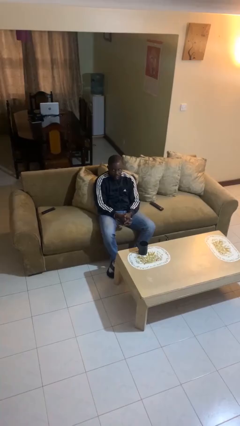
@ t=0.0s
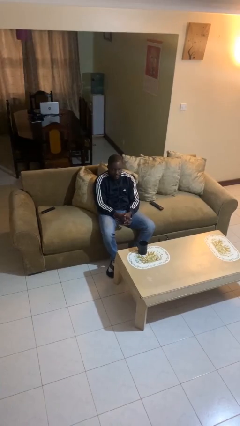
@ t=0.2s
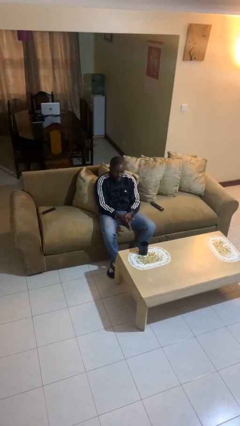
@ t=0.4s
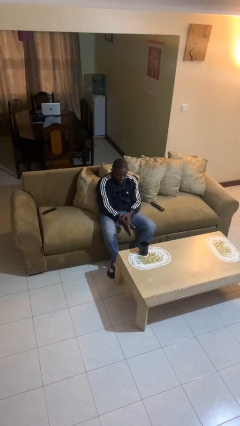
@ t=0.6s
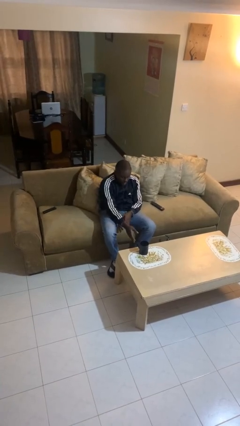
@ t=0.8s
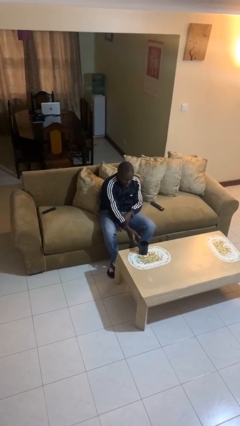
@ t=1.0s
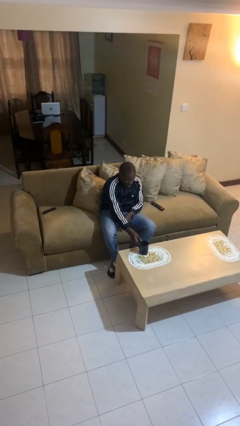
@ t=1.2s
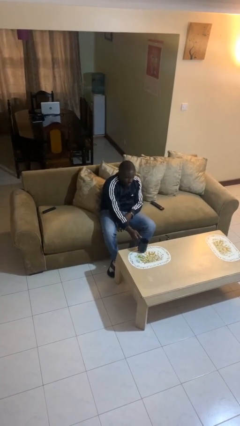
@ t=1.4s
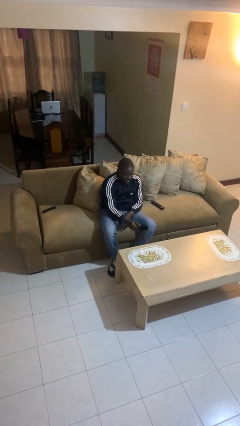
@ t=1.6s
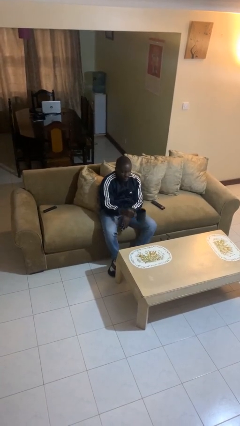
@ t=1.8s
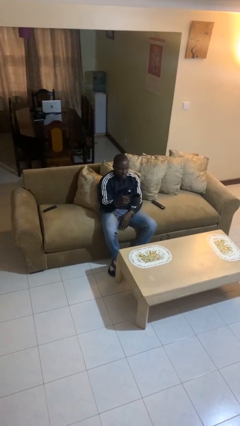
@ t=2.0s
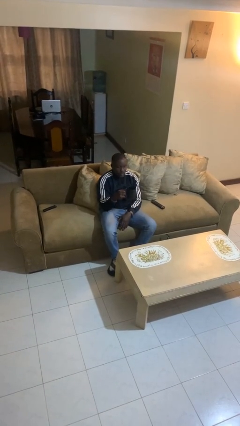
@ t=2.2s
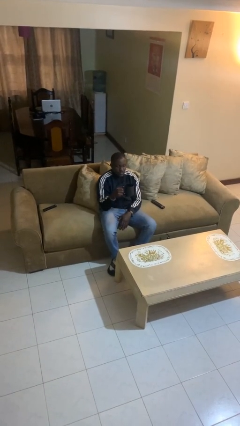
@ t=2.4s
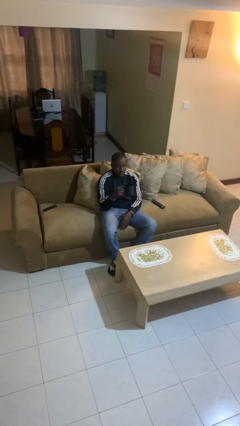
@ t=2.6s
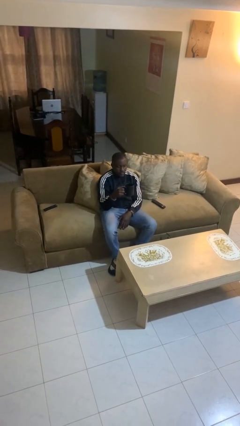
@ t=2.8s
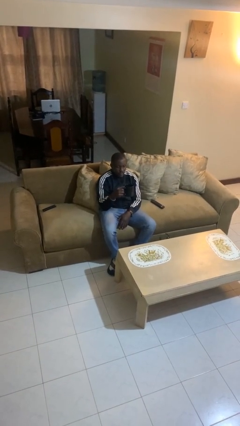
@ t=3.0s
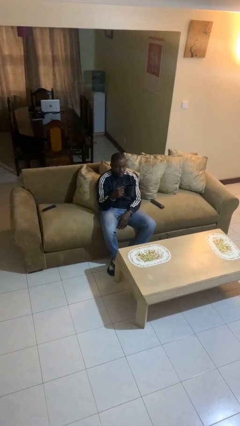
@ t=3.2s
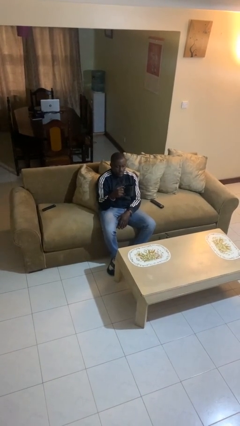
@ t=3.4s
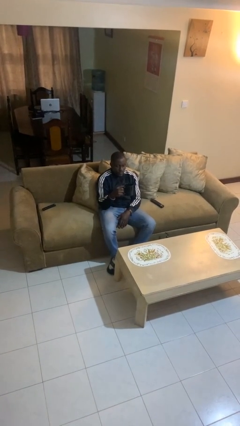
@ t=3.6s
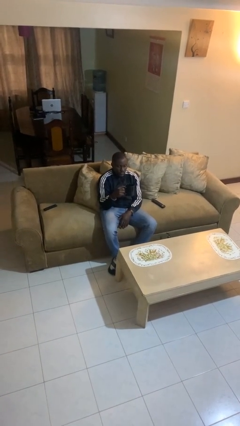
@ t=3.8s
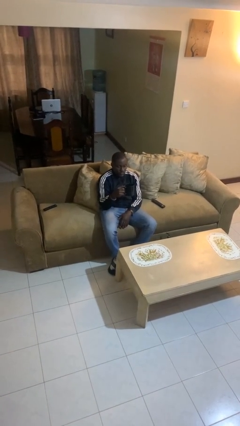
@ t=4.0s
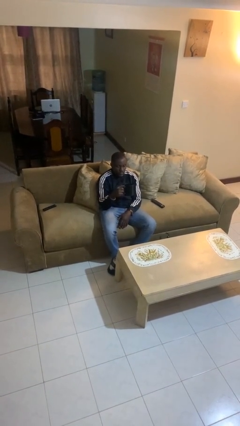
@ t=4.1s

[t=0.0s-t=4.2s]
person picks up object from table

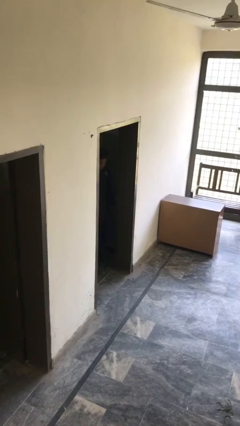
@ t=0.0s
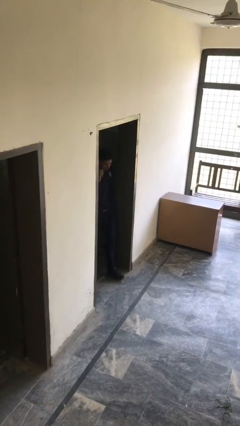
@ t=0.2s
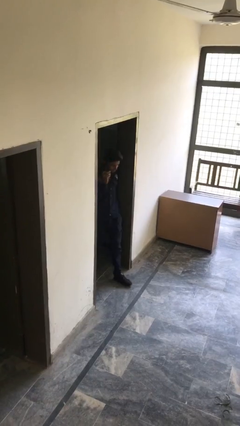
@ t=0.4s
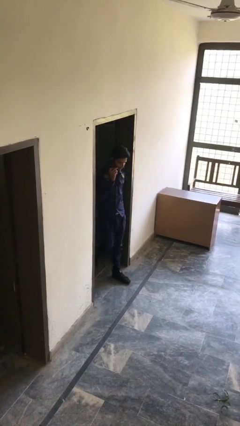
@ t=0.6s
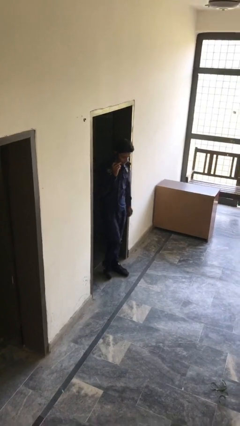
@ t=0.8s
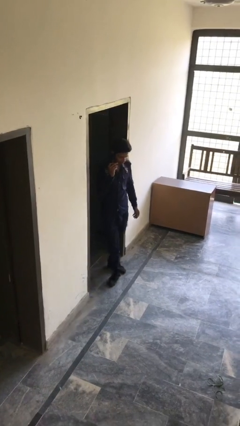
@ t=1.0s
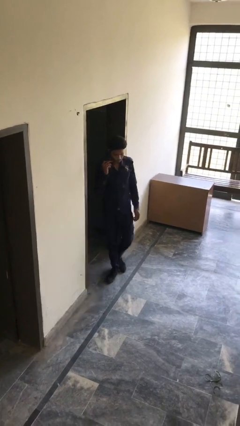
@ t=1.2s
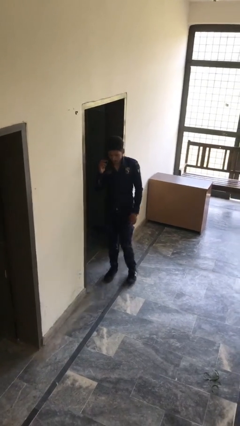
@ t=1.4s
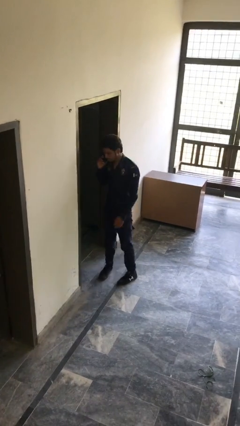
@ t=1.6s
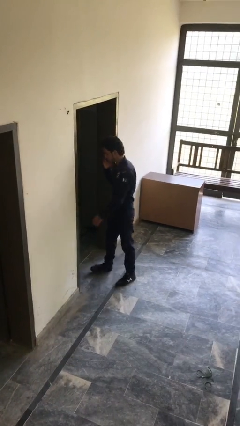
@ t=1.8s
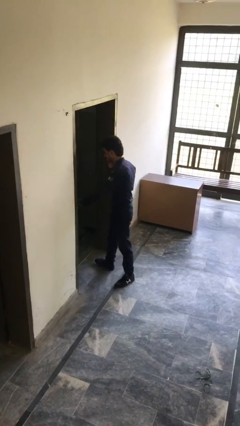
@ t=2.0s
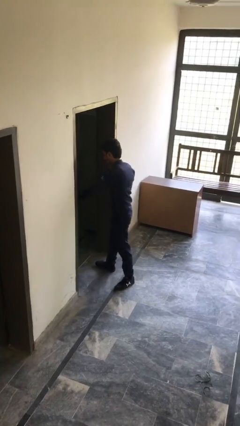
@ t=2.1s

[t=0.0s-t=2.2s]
person enters scene through structure

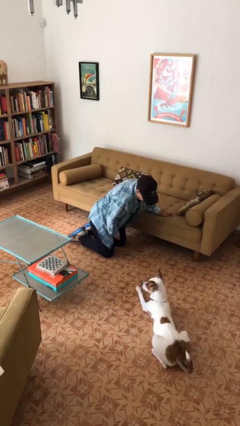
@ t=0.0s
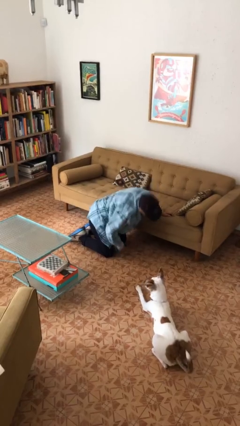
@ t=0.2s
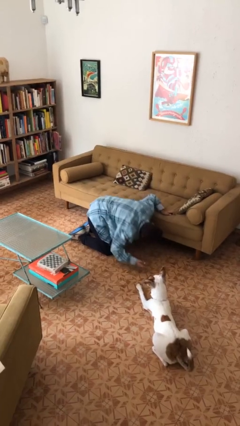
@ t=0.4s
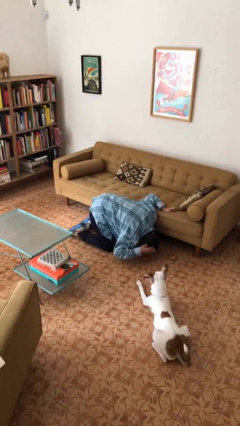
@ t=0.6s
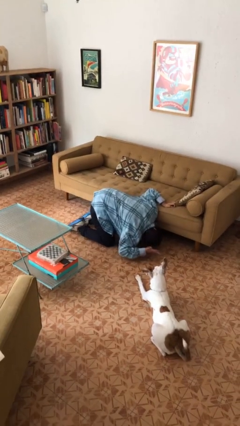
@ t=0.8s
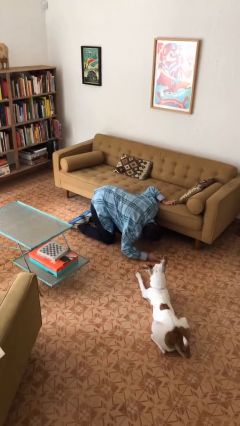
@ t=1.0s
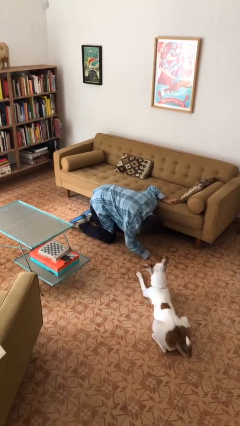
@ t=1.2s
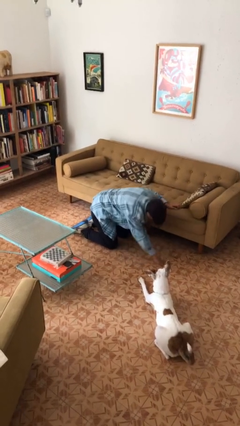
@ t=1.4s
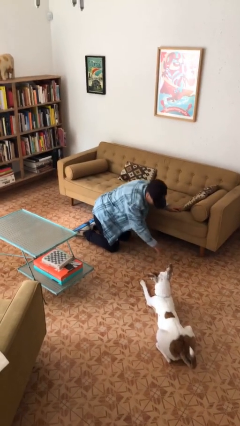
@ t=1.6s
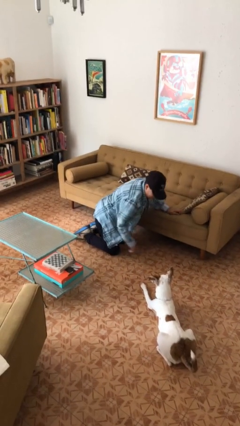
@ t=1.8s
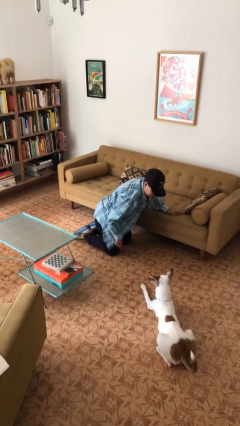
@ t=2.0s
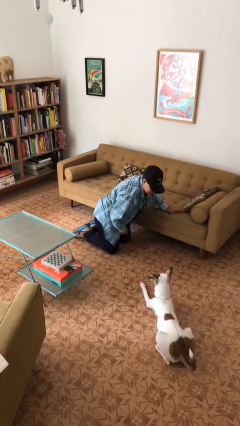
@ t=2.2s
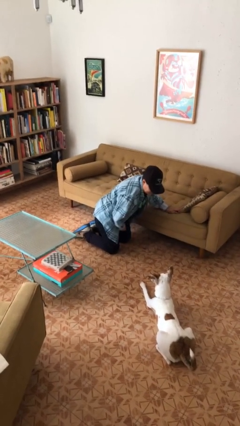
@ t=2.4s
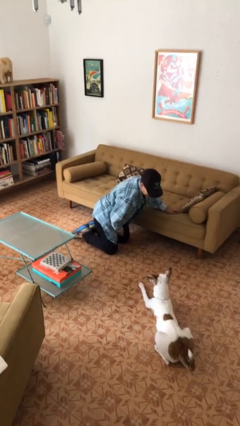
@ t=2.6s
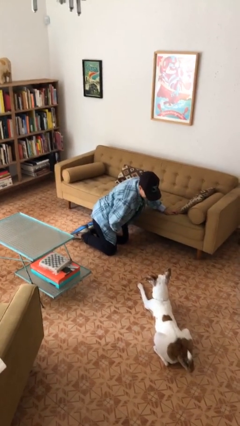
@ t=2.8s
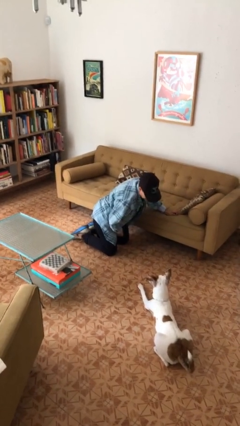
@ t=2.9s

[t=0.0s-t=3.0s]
person searches under couch

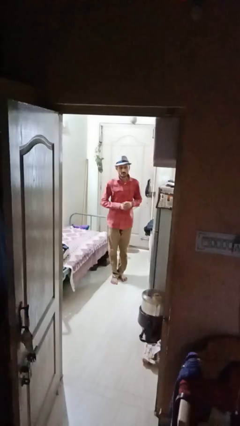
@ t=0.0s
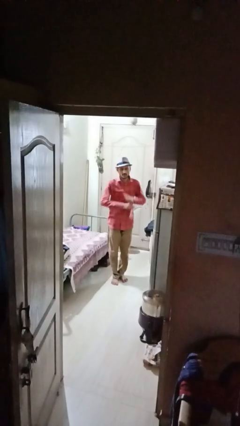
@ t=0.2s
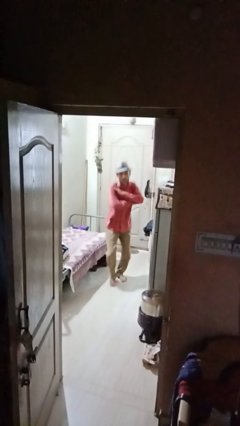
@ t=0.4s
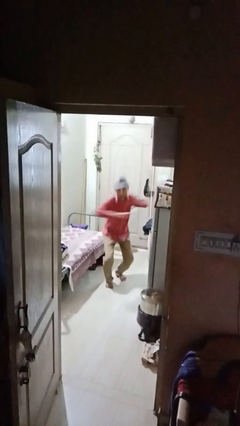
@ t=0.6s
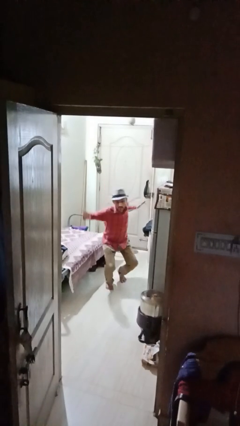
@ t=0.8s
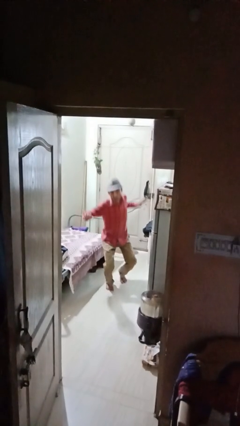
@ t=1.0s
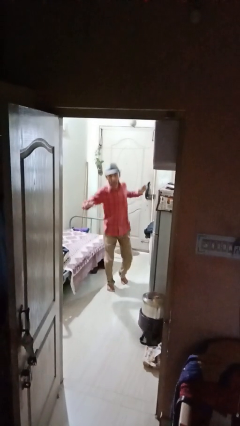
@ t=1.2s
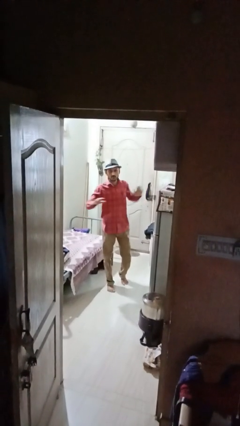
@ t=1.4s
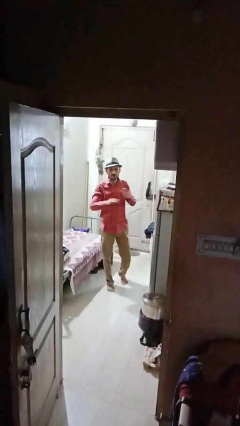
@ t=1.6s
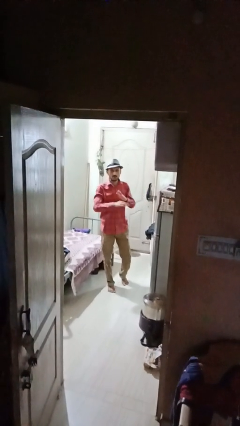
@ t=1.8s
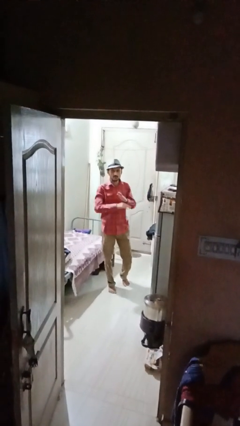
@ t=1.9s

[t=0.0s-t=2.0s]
person karate chop

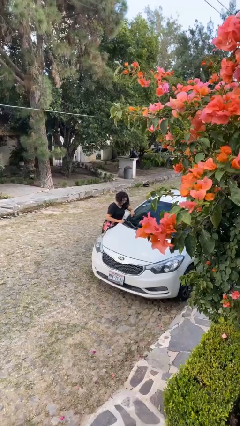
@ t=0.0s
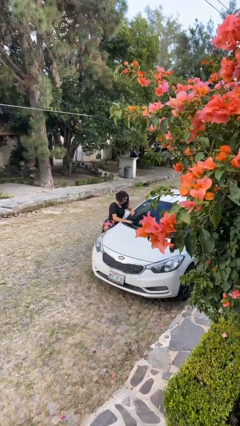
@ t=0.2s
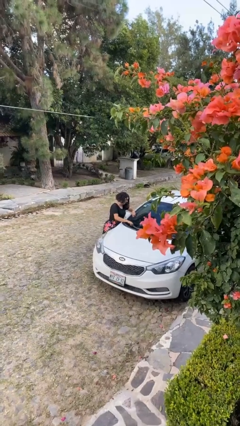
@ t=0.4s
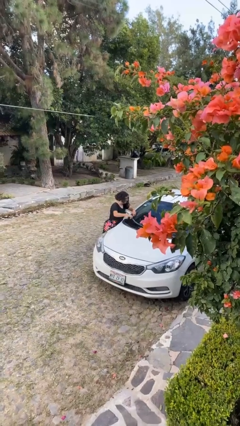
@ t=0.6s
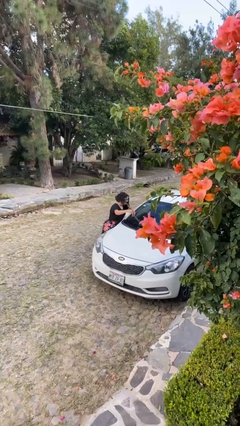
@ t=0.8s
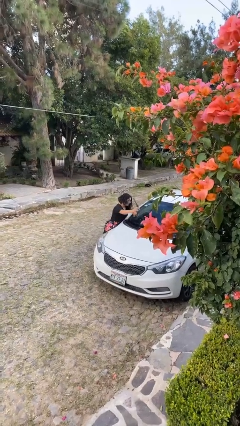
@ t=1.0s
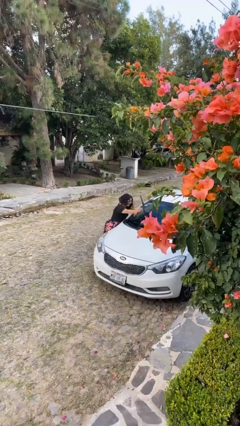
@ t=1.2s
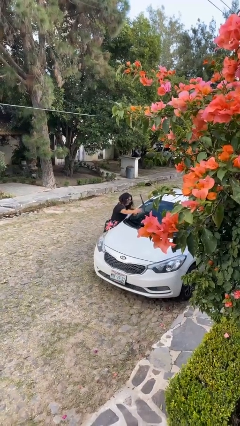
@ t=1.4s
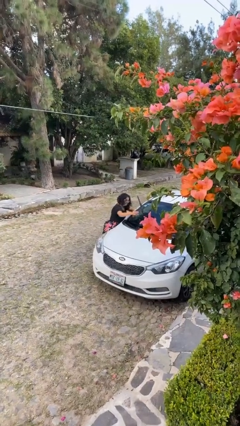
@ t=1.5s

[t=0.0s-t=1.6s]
person flips up car wipers

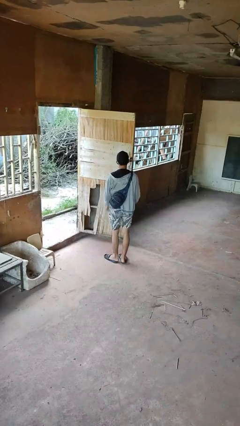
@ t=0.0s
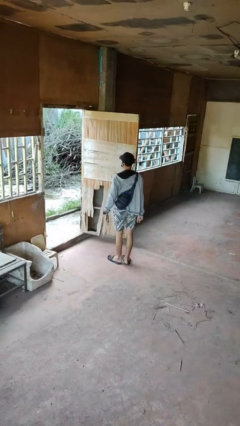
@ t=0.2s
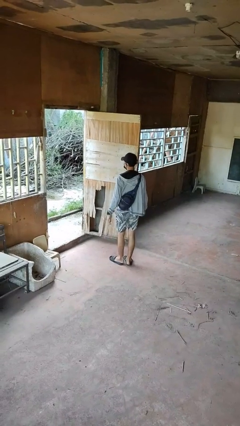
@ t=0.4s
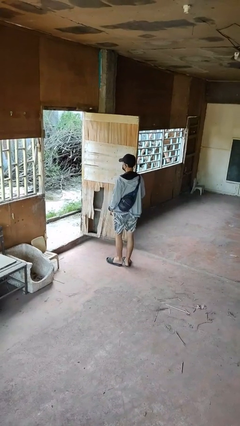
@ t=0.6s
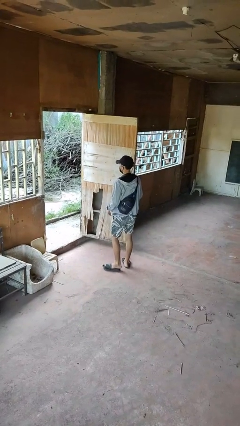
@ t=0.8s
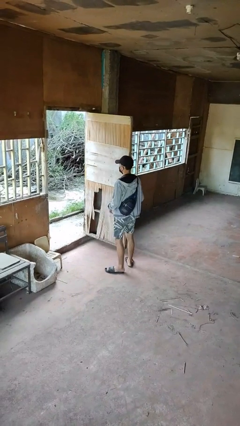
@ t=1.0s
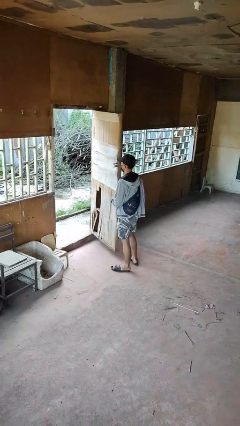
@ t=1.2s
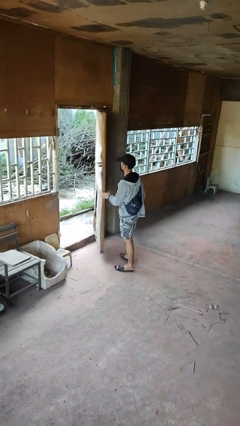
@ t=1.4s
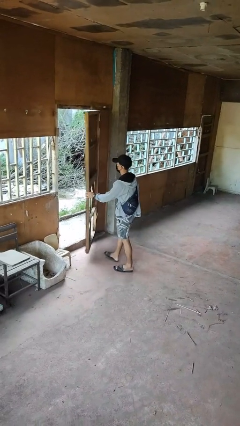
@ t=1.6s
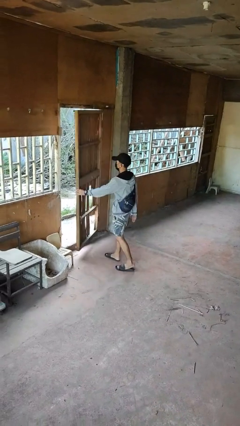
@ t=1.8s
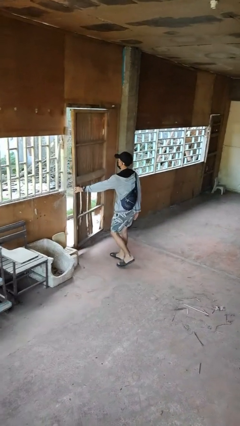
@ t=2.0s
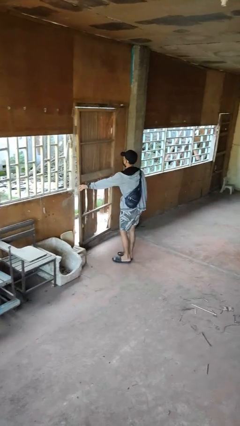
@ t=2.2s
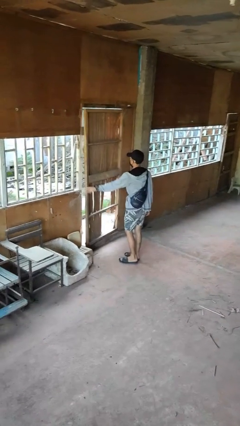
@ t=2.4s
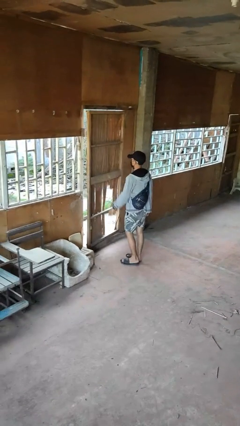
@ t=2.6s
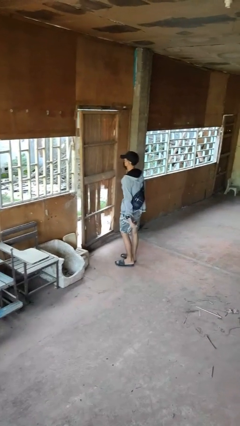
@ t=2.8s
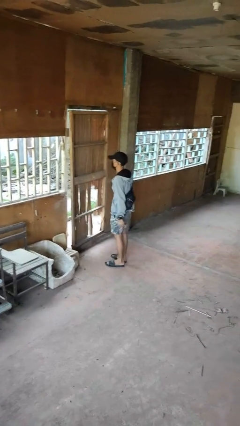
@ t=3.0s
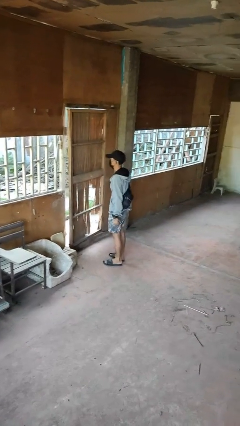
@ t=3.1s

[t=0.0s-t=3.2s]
person closes facility door

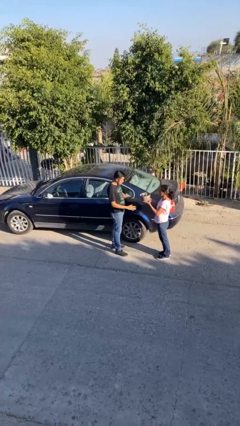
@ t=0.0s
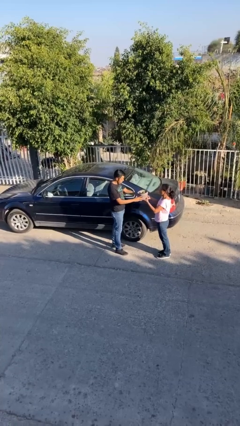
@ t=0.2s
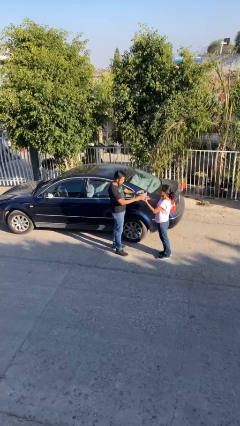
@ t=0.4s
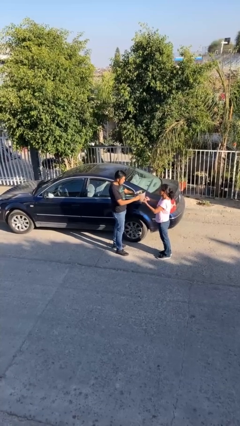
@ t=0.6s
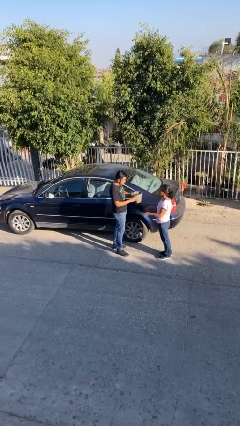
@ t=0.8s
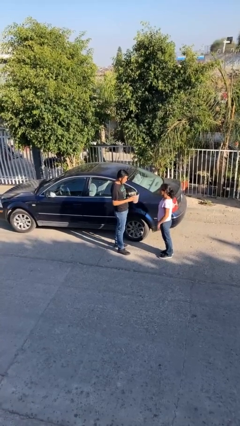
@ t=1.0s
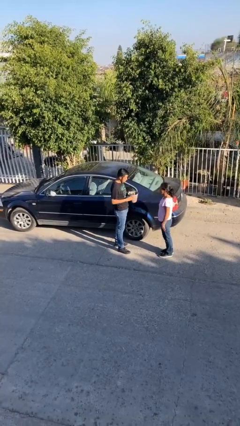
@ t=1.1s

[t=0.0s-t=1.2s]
person transfers object to person
